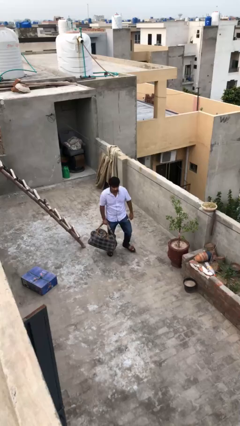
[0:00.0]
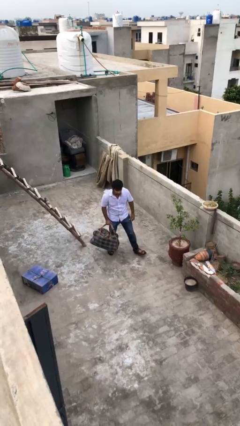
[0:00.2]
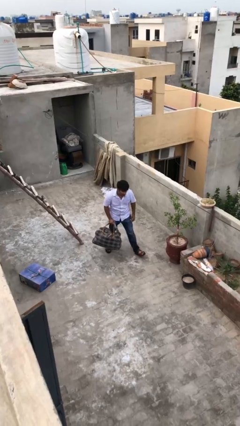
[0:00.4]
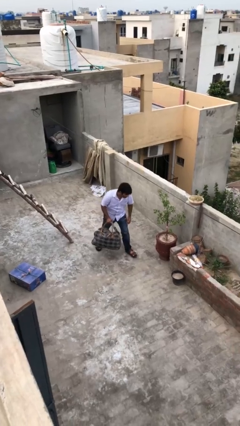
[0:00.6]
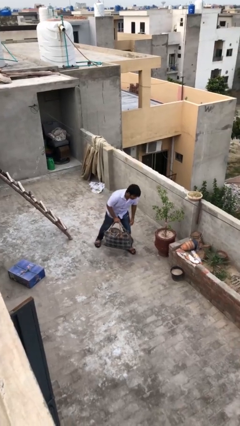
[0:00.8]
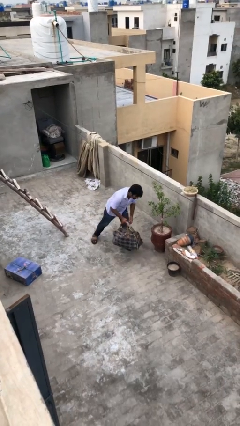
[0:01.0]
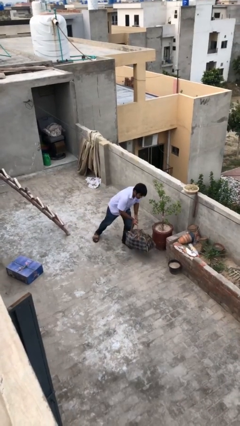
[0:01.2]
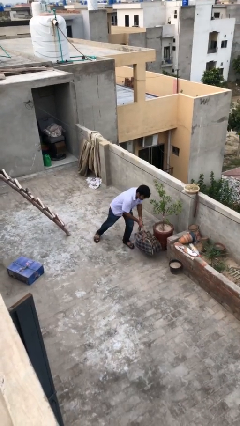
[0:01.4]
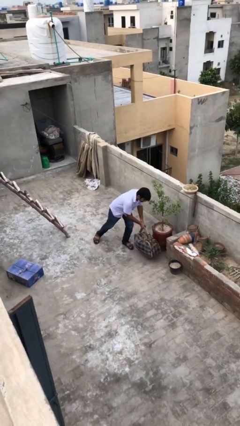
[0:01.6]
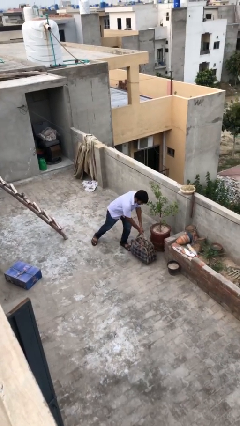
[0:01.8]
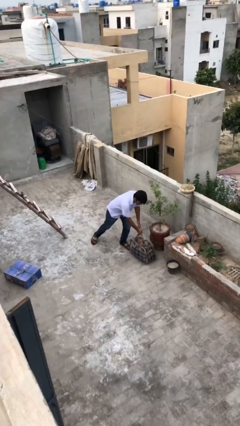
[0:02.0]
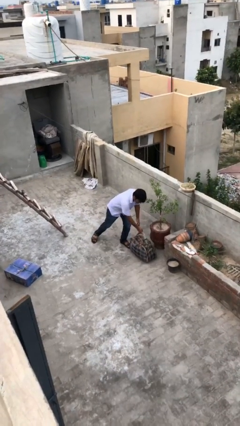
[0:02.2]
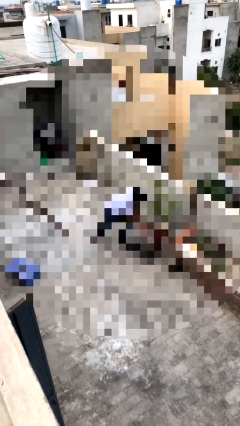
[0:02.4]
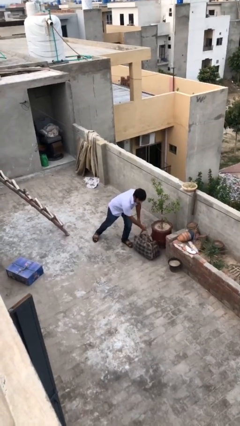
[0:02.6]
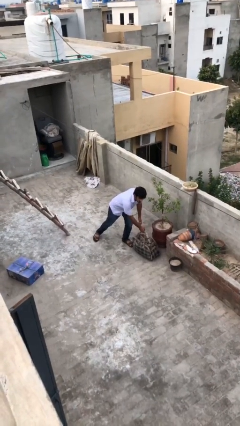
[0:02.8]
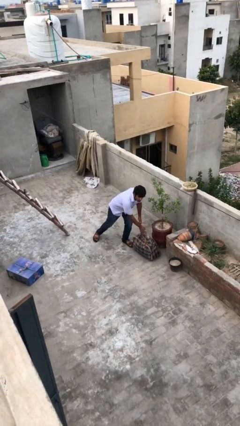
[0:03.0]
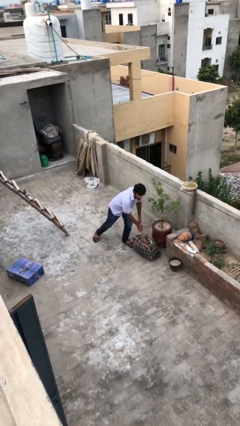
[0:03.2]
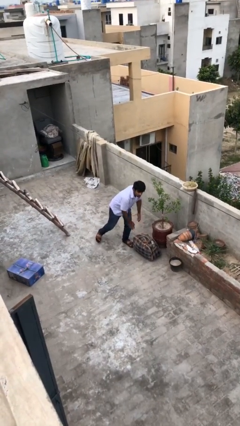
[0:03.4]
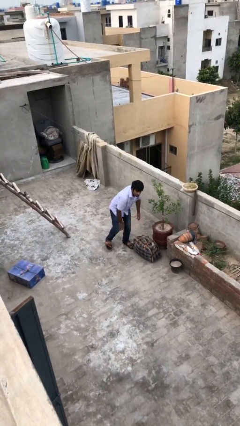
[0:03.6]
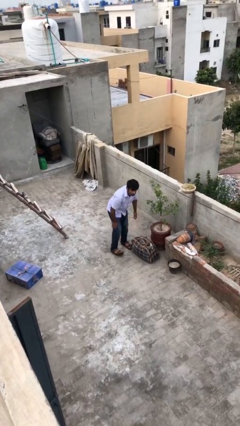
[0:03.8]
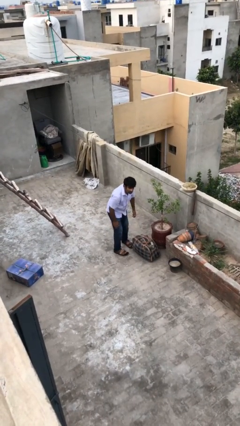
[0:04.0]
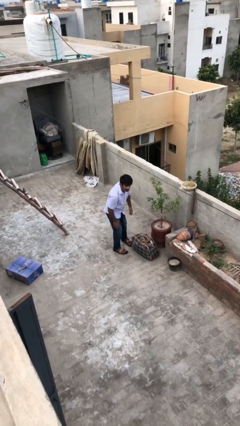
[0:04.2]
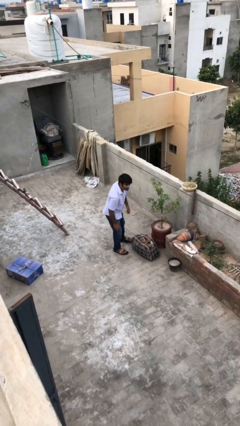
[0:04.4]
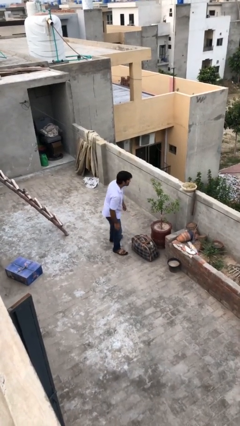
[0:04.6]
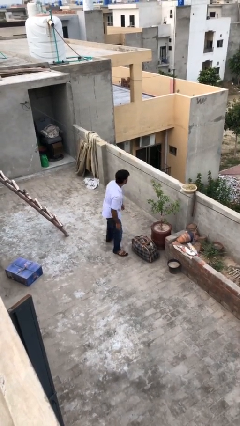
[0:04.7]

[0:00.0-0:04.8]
person puts down object on floor

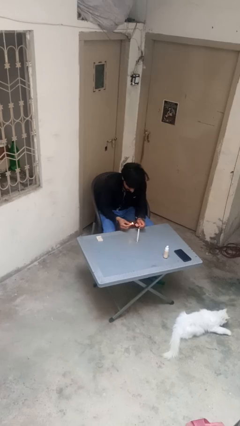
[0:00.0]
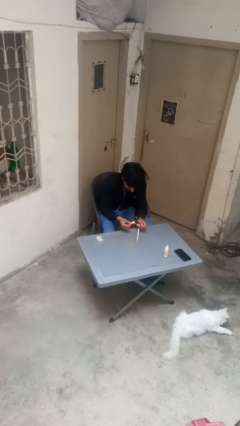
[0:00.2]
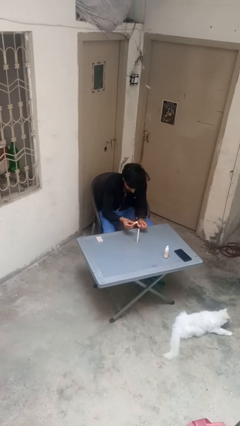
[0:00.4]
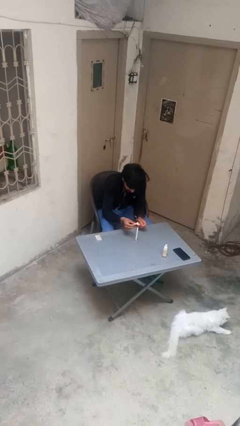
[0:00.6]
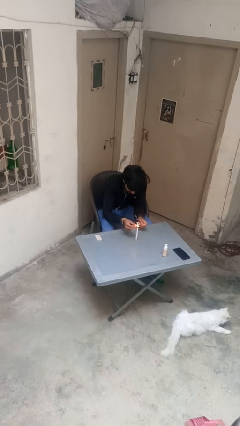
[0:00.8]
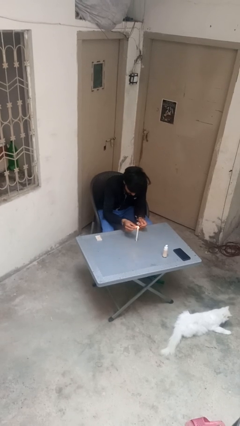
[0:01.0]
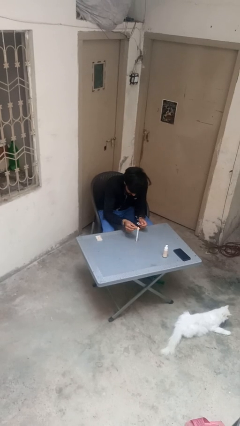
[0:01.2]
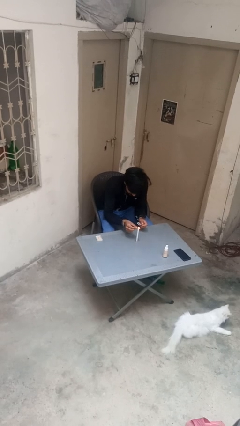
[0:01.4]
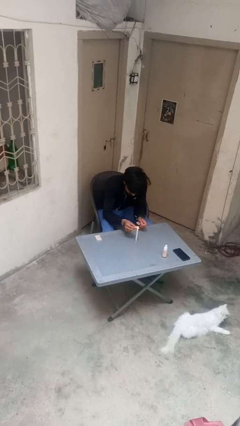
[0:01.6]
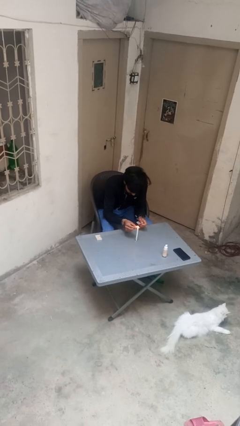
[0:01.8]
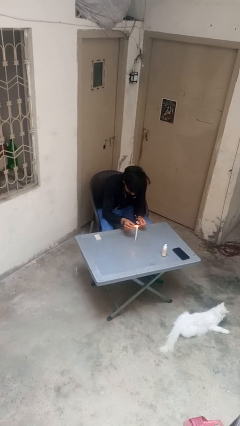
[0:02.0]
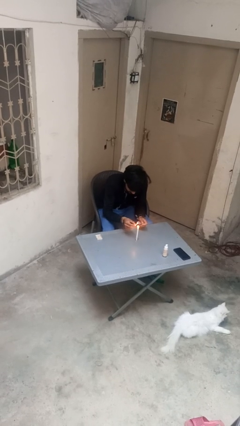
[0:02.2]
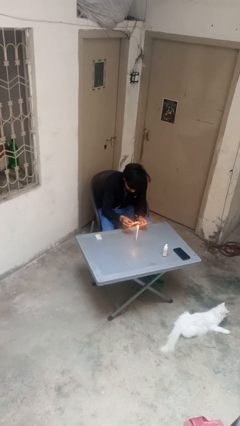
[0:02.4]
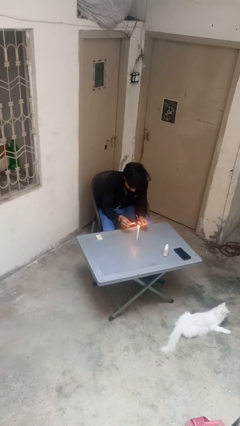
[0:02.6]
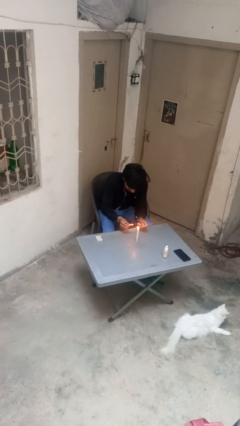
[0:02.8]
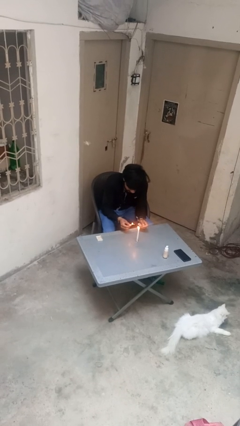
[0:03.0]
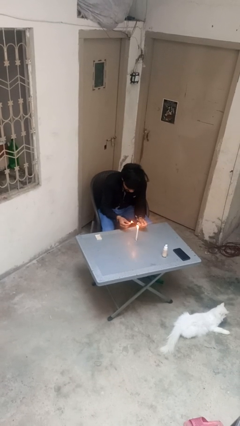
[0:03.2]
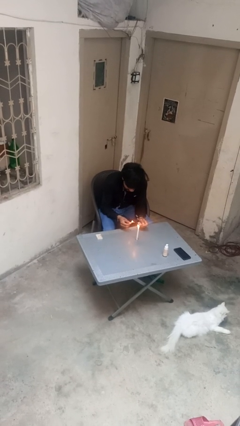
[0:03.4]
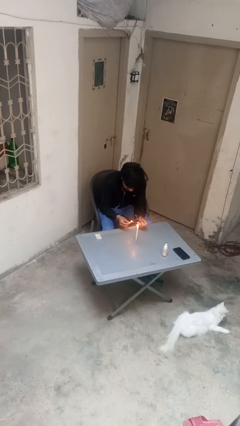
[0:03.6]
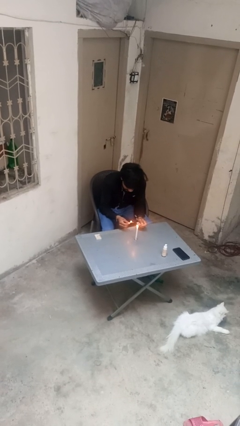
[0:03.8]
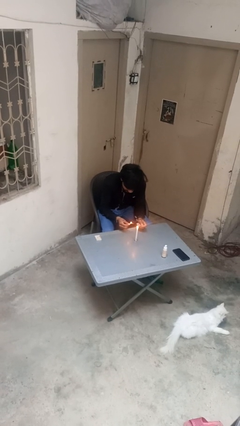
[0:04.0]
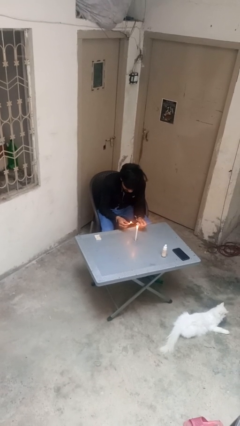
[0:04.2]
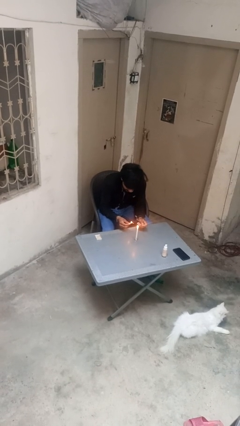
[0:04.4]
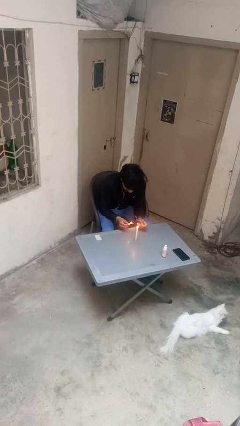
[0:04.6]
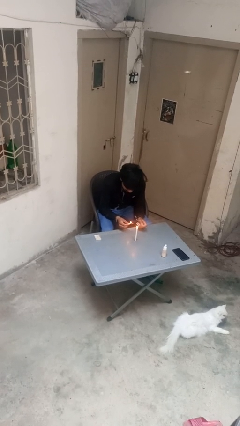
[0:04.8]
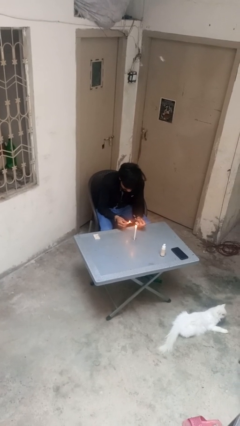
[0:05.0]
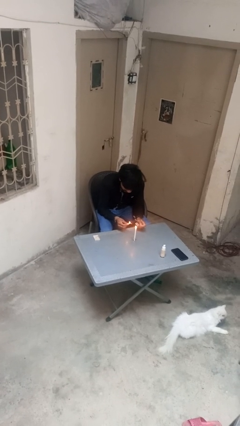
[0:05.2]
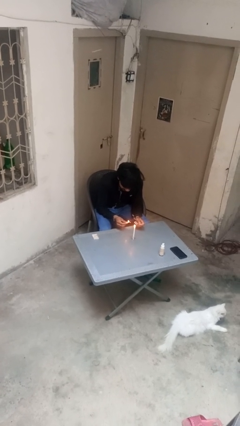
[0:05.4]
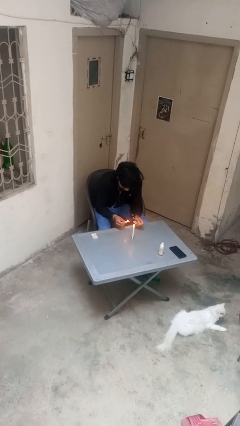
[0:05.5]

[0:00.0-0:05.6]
person lights candle

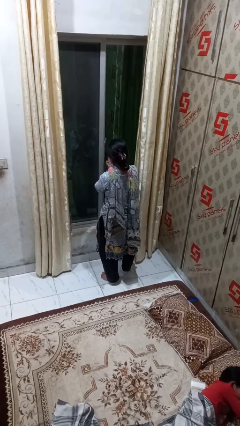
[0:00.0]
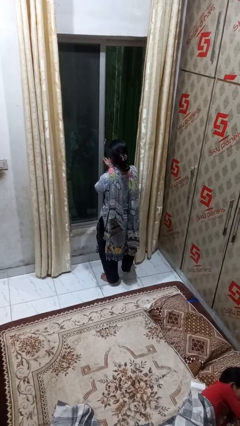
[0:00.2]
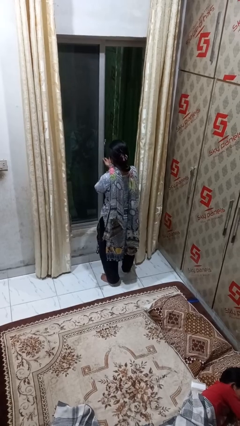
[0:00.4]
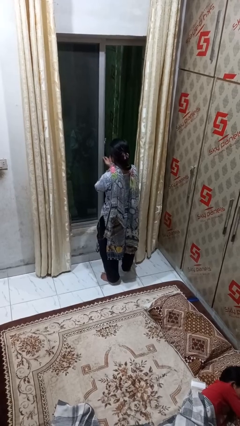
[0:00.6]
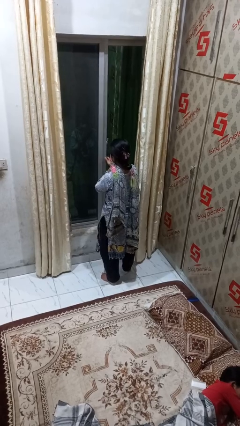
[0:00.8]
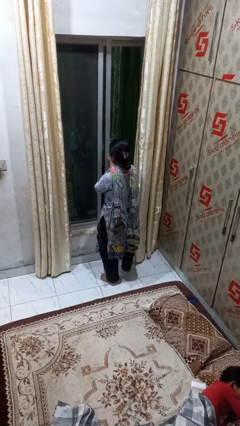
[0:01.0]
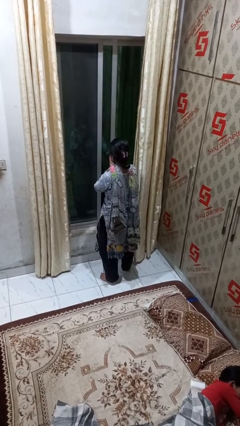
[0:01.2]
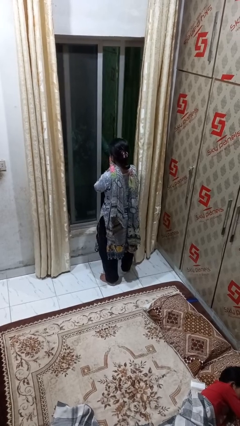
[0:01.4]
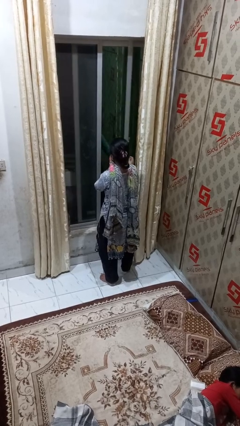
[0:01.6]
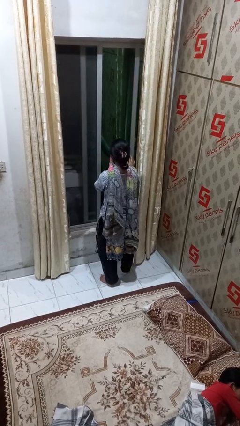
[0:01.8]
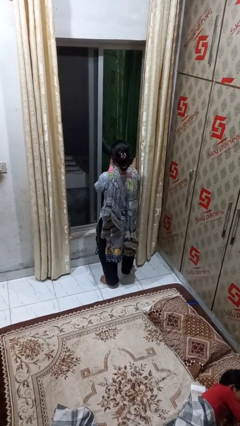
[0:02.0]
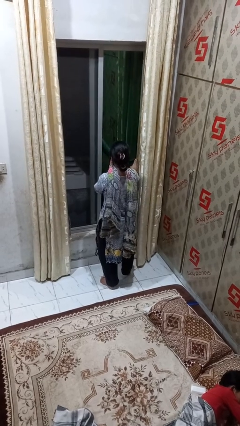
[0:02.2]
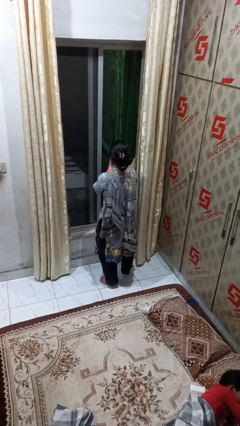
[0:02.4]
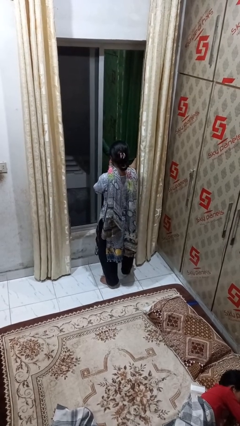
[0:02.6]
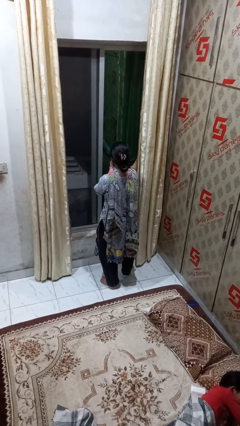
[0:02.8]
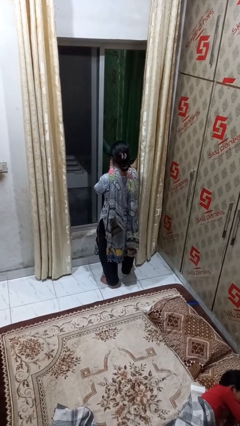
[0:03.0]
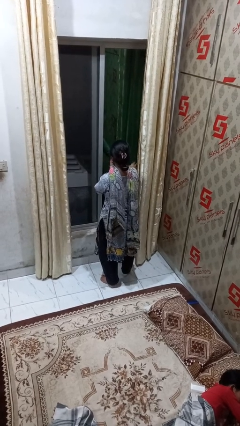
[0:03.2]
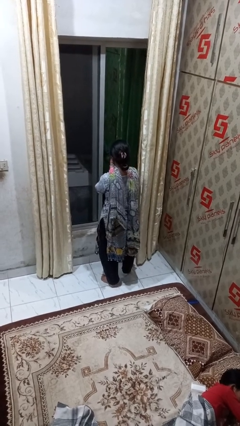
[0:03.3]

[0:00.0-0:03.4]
person opens home window

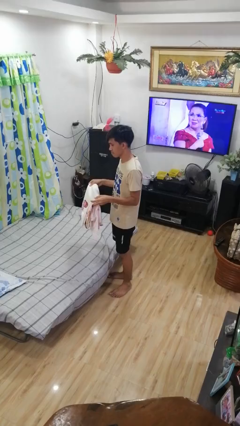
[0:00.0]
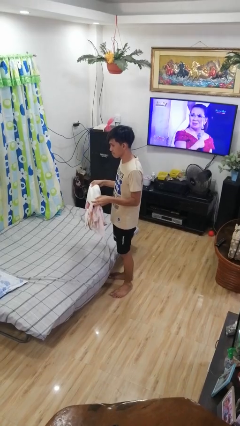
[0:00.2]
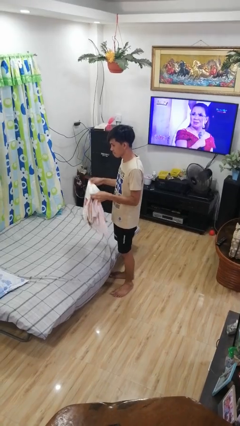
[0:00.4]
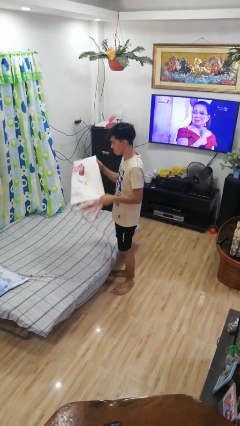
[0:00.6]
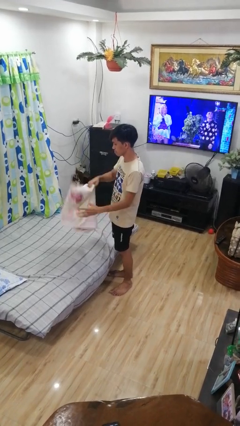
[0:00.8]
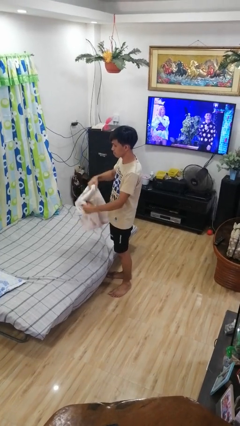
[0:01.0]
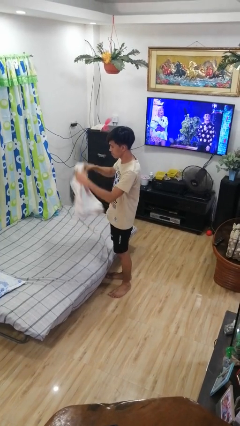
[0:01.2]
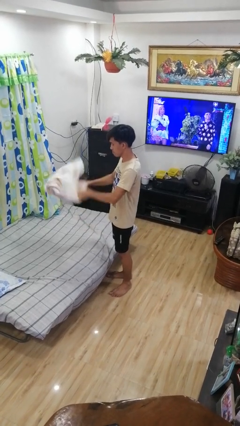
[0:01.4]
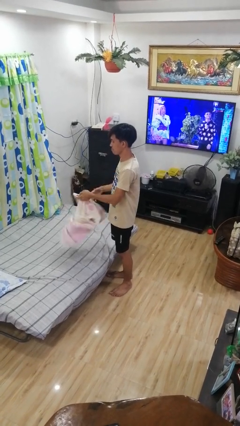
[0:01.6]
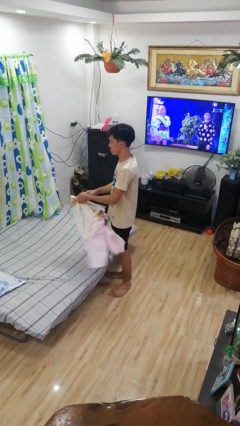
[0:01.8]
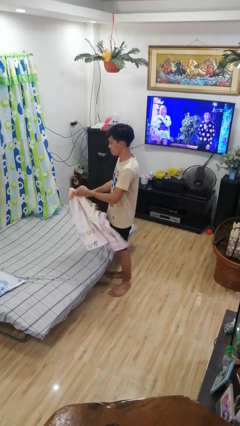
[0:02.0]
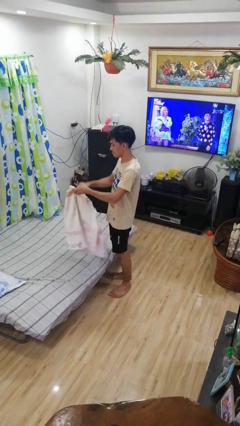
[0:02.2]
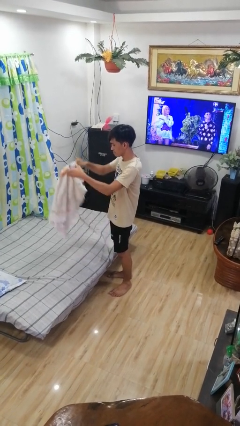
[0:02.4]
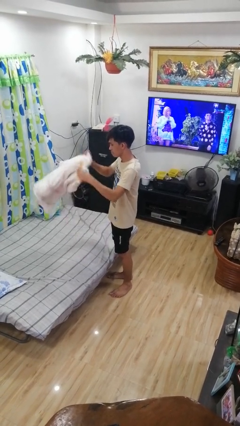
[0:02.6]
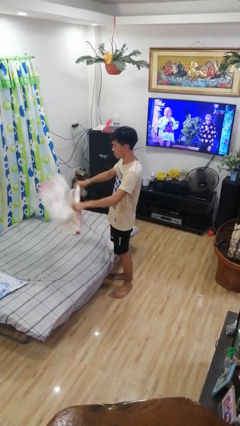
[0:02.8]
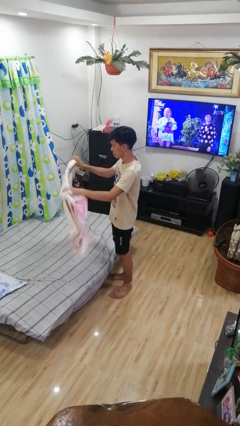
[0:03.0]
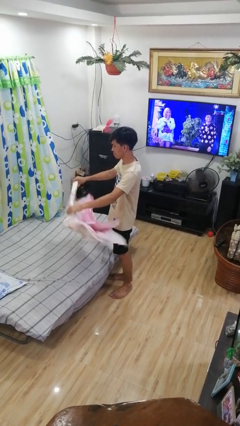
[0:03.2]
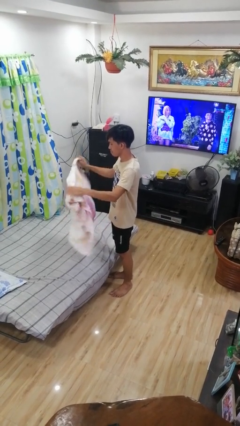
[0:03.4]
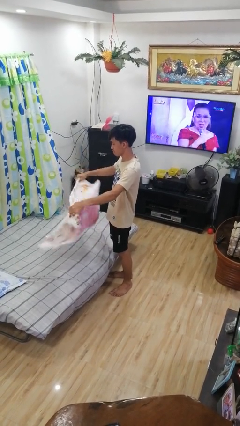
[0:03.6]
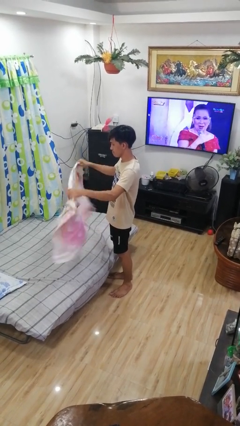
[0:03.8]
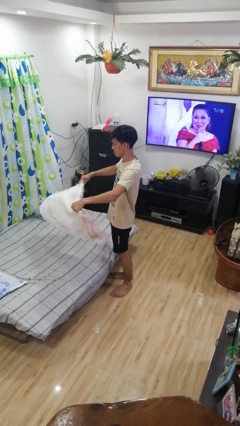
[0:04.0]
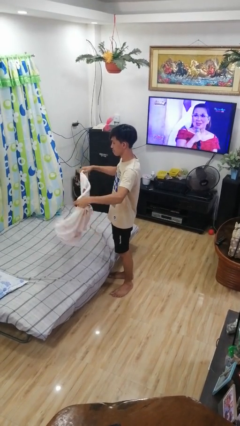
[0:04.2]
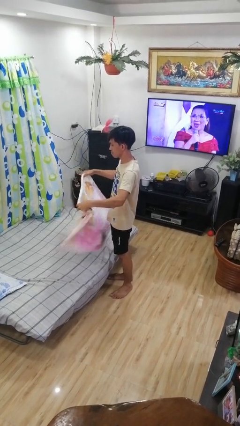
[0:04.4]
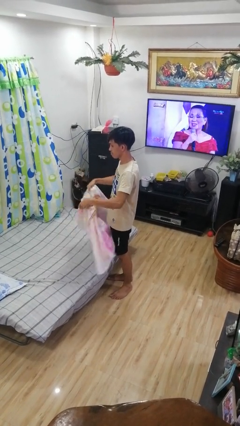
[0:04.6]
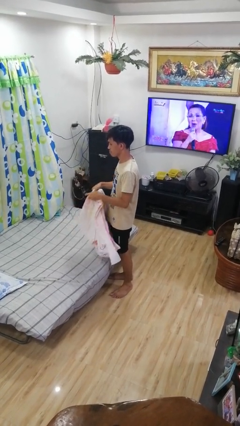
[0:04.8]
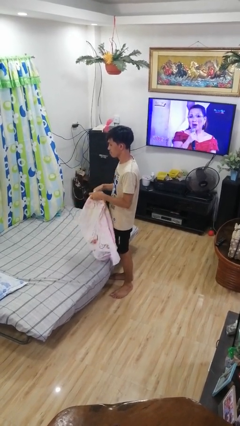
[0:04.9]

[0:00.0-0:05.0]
person unfolds blanket
